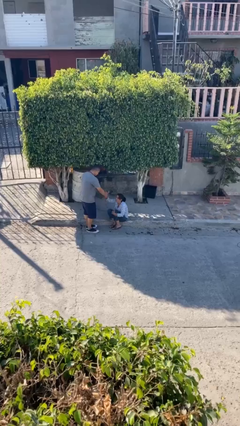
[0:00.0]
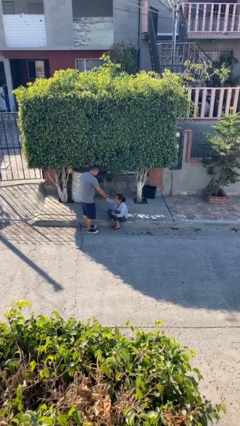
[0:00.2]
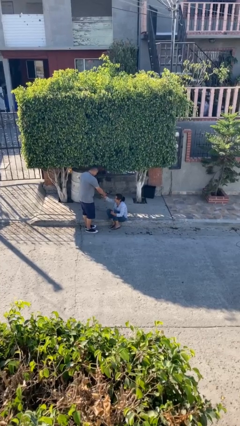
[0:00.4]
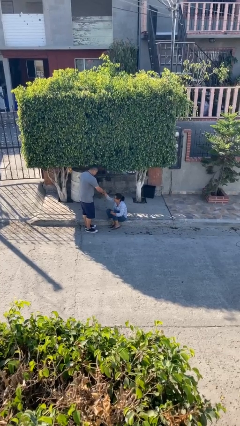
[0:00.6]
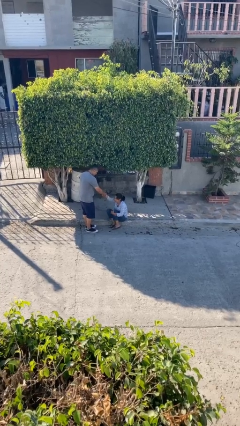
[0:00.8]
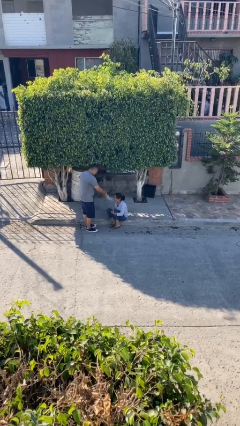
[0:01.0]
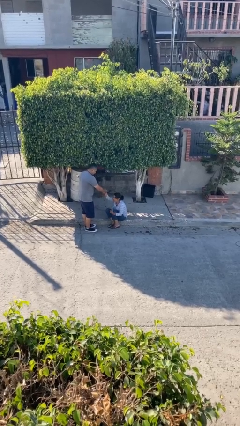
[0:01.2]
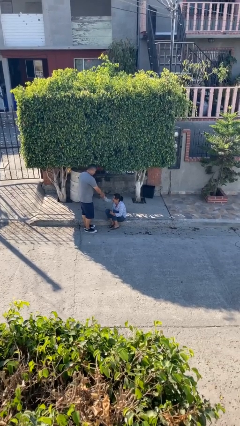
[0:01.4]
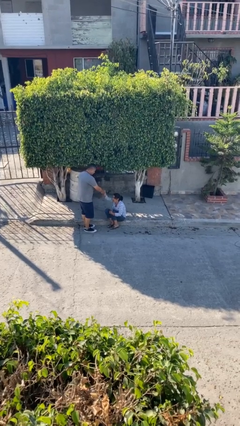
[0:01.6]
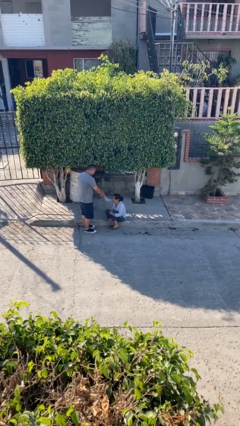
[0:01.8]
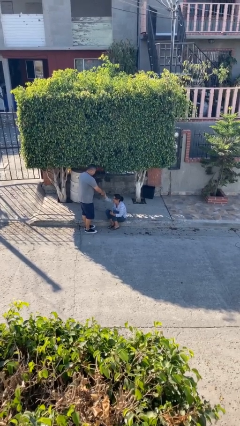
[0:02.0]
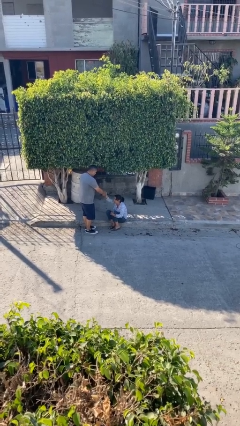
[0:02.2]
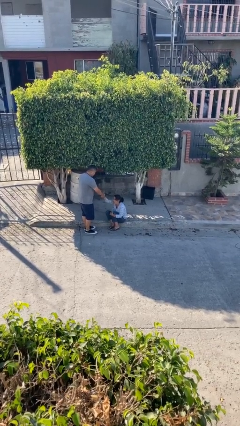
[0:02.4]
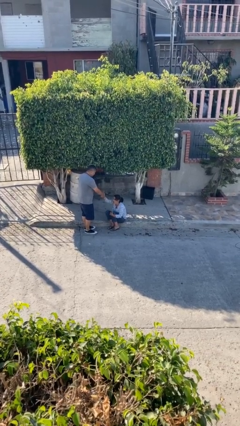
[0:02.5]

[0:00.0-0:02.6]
person shakes hand

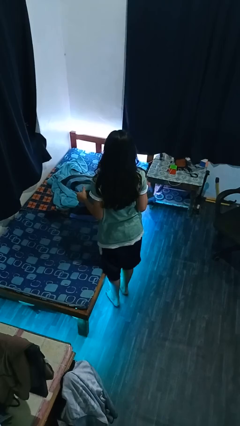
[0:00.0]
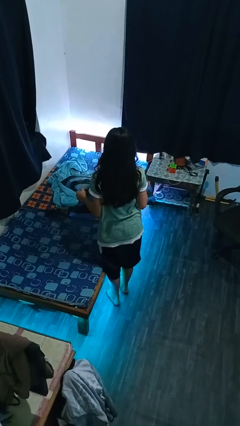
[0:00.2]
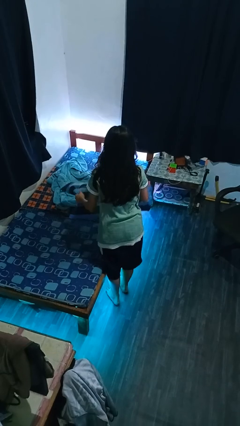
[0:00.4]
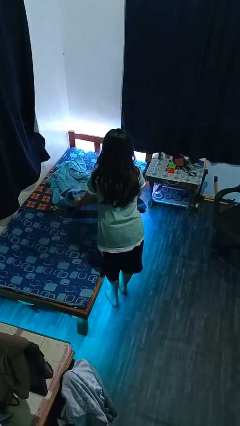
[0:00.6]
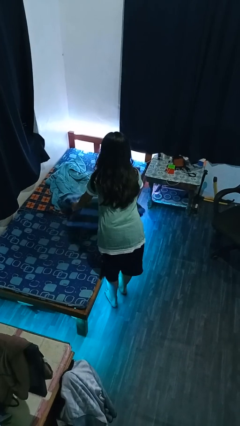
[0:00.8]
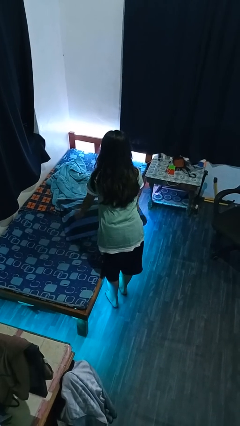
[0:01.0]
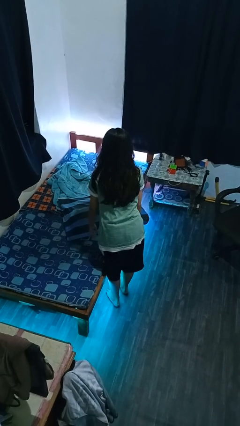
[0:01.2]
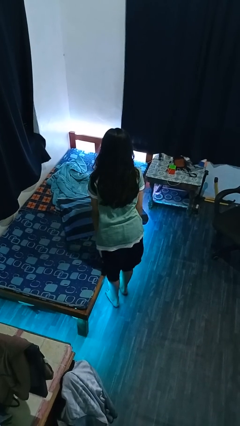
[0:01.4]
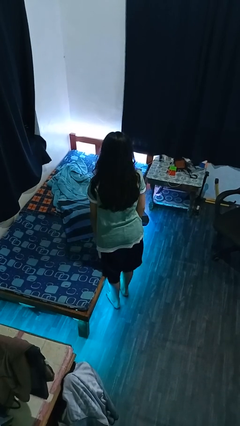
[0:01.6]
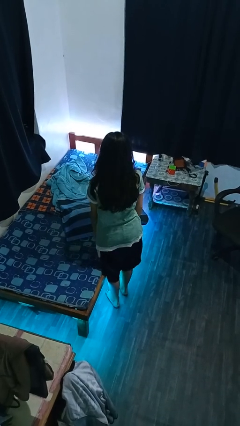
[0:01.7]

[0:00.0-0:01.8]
person puts down object on bed

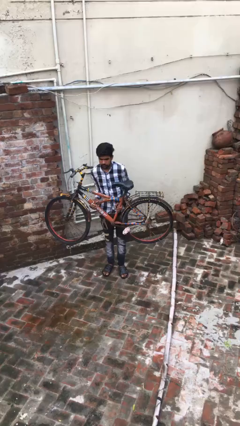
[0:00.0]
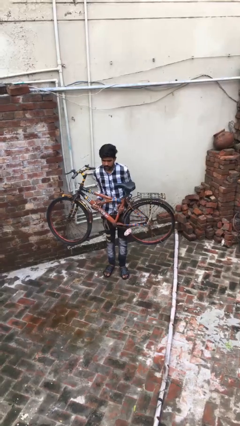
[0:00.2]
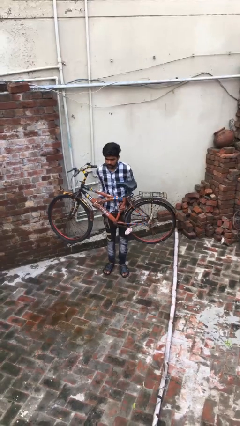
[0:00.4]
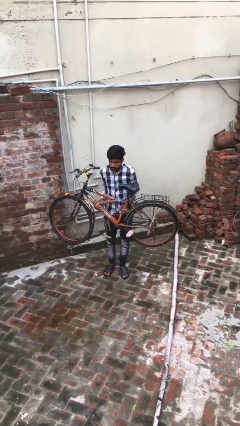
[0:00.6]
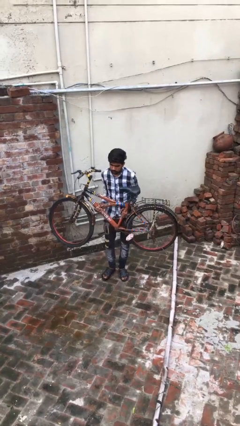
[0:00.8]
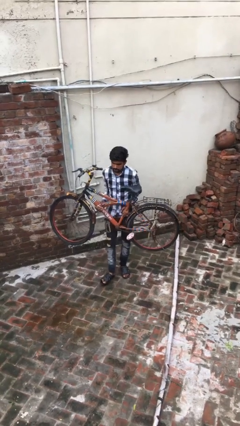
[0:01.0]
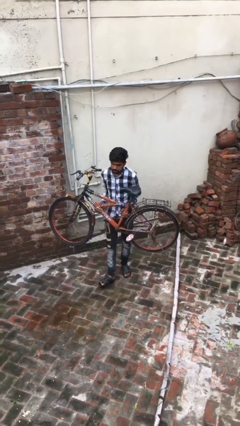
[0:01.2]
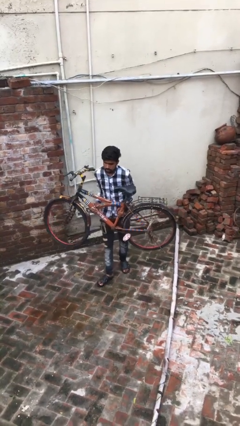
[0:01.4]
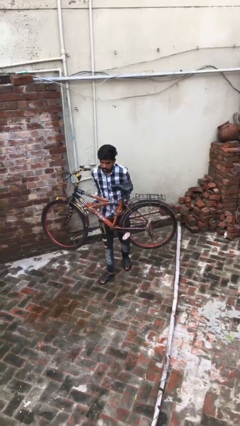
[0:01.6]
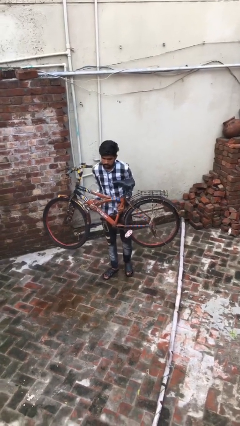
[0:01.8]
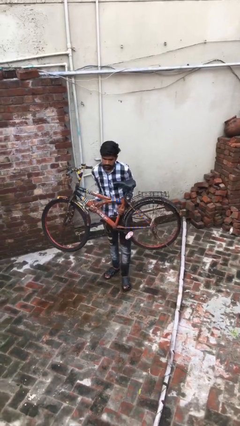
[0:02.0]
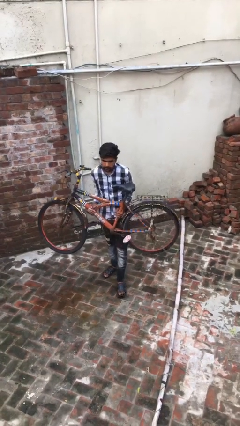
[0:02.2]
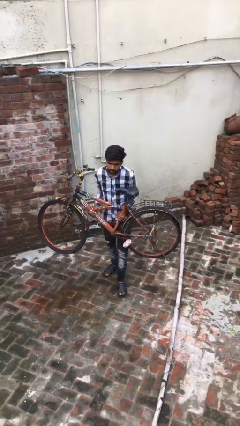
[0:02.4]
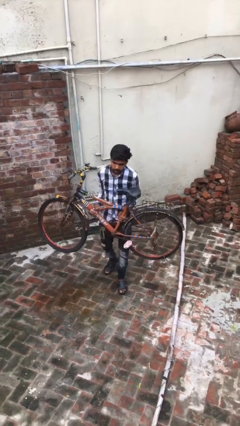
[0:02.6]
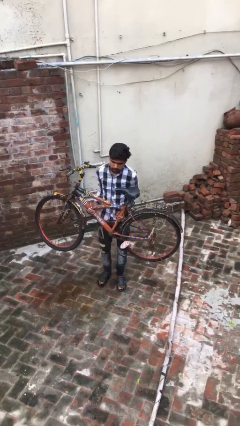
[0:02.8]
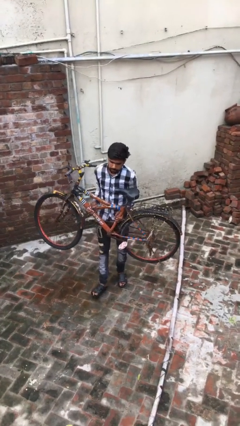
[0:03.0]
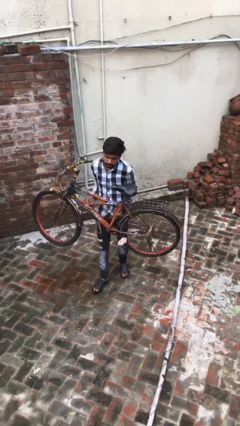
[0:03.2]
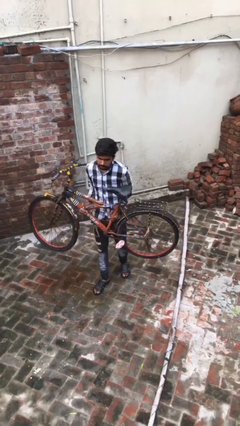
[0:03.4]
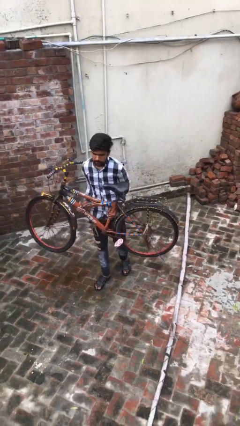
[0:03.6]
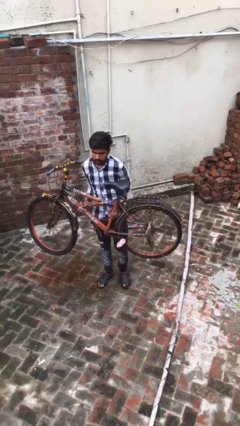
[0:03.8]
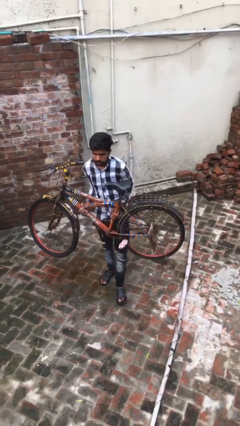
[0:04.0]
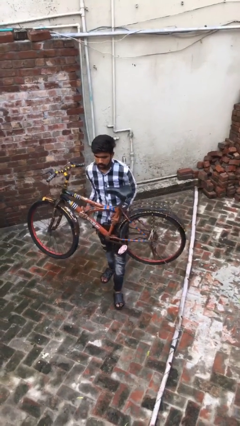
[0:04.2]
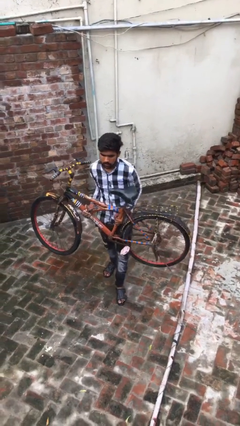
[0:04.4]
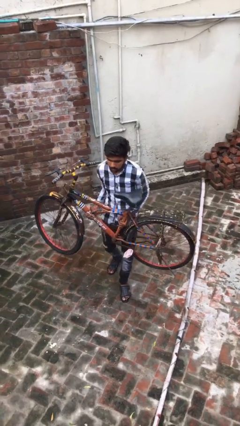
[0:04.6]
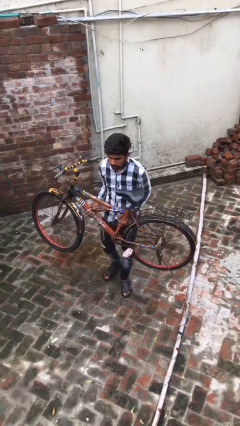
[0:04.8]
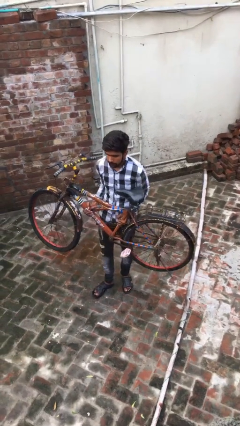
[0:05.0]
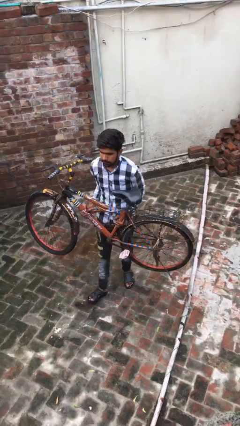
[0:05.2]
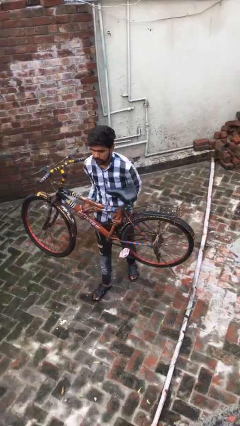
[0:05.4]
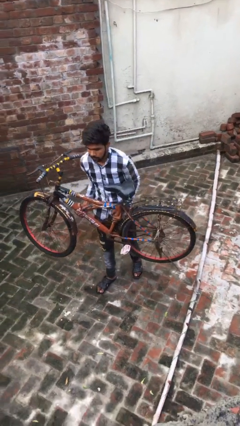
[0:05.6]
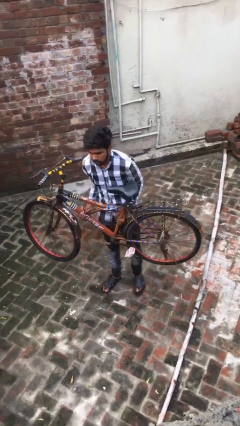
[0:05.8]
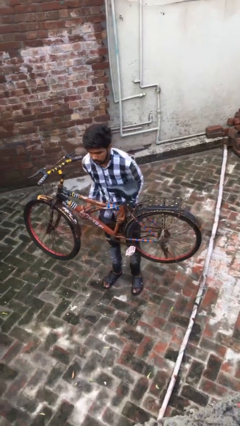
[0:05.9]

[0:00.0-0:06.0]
person carries heavy object

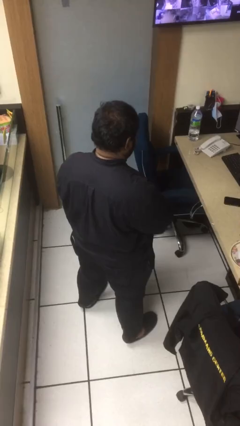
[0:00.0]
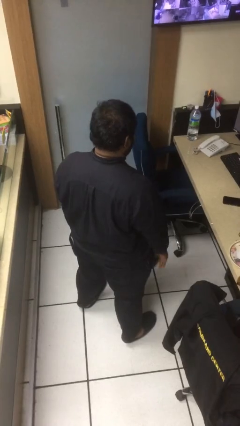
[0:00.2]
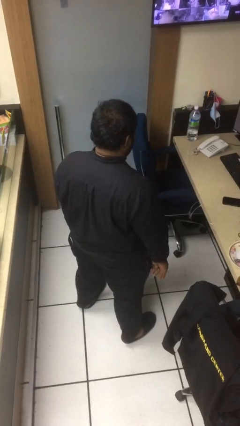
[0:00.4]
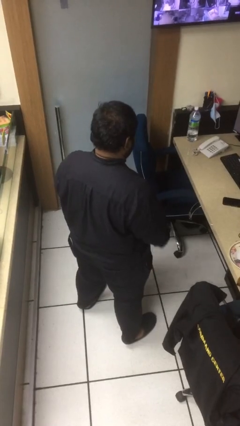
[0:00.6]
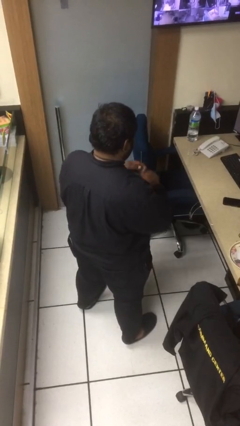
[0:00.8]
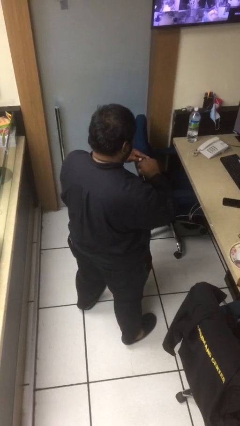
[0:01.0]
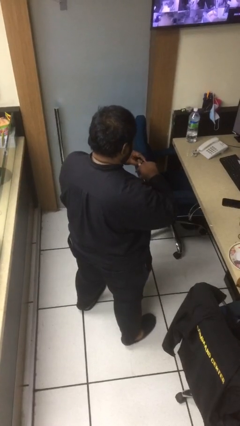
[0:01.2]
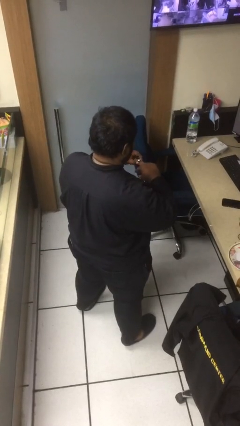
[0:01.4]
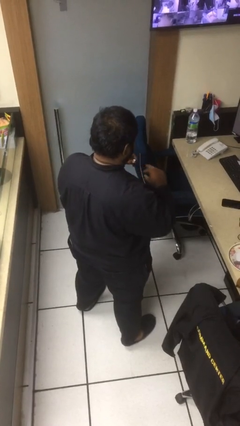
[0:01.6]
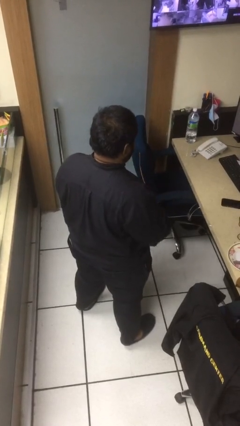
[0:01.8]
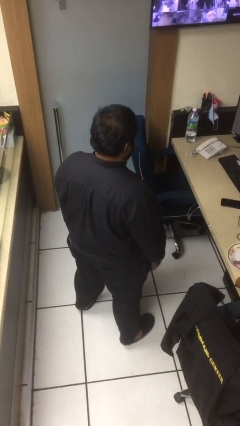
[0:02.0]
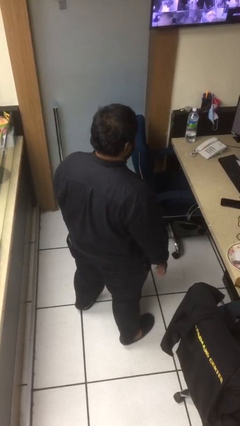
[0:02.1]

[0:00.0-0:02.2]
person takes off ring

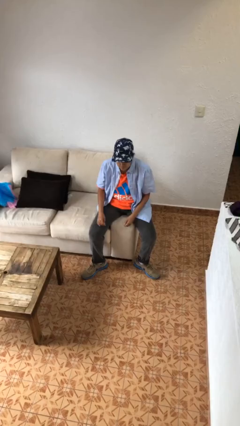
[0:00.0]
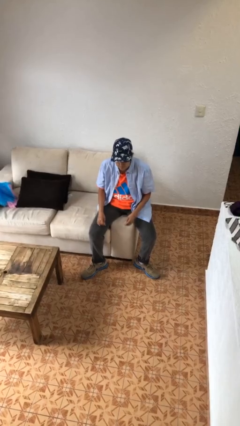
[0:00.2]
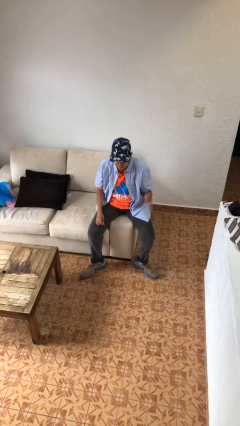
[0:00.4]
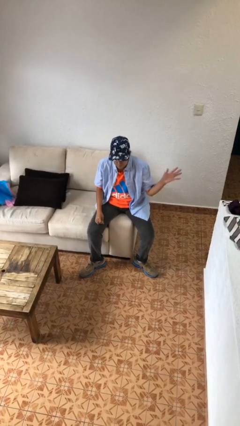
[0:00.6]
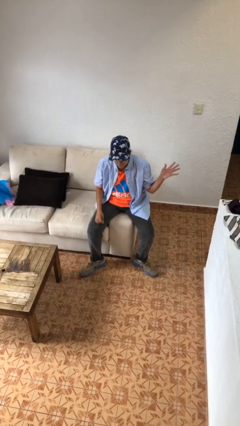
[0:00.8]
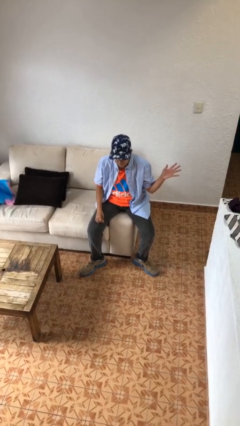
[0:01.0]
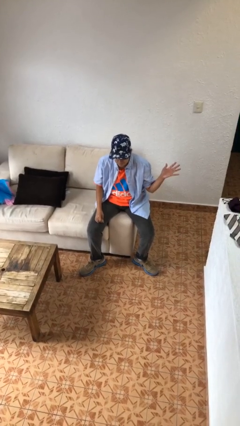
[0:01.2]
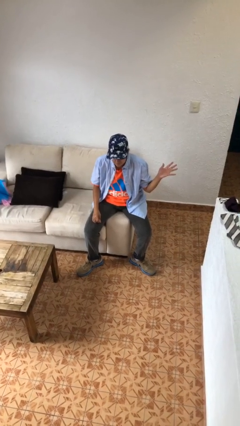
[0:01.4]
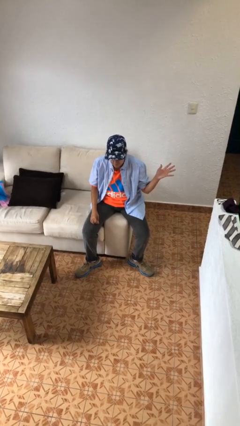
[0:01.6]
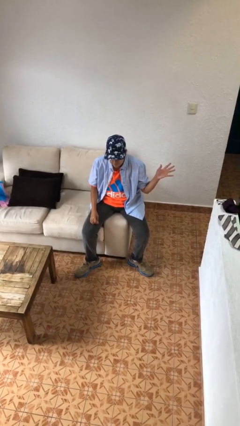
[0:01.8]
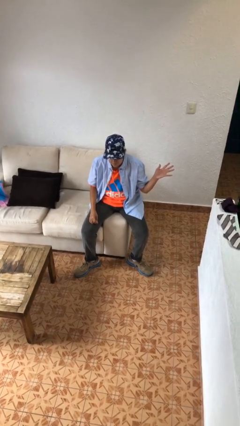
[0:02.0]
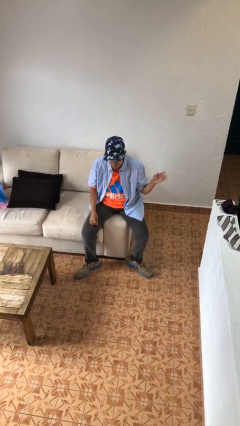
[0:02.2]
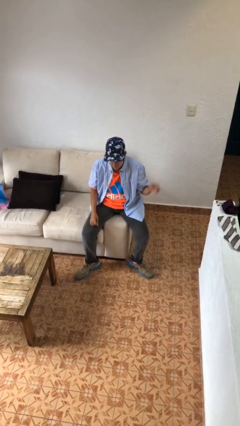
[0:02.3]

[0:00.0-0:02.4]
person gestures number five

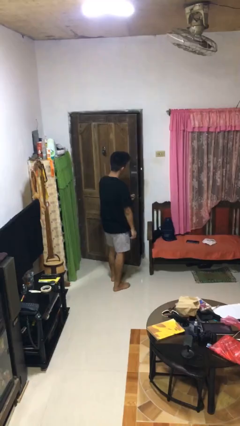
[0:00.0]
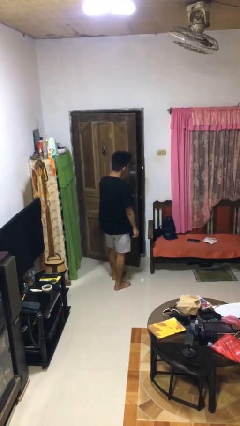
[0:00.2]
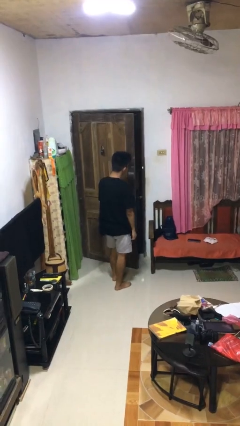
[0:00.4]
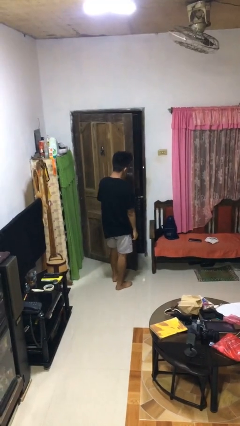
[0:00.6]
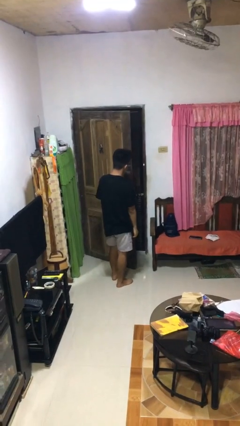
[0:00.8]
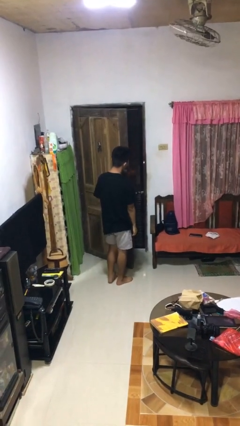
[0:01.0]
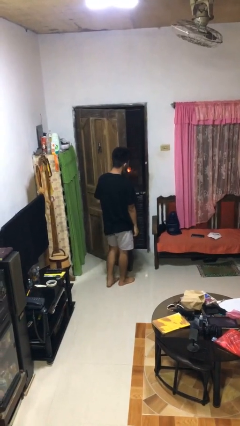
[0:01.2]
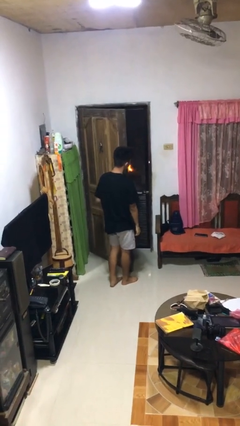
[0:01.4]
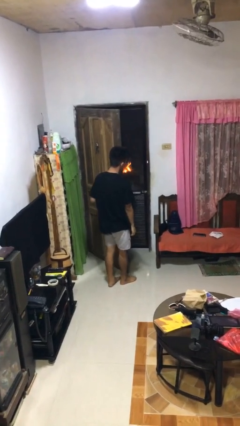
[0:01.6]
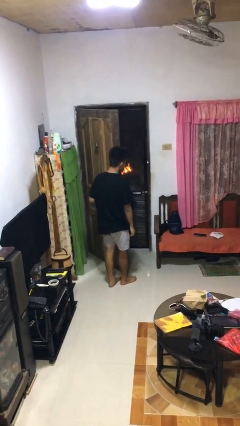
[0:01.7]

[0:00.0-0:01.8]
person opens facility door

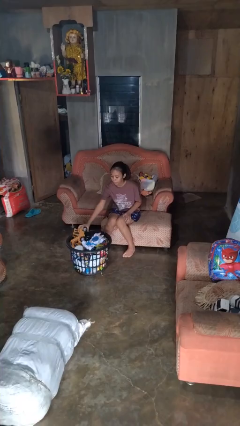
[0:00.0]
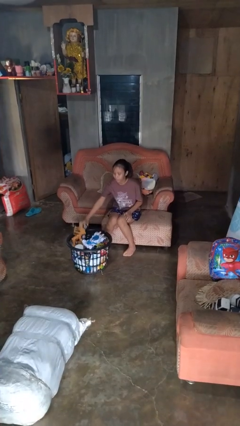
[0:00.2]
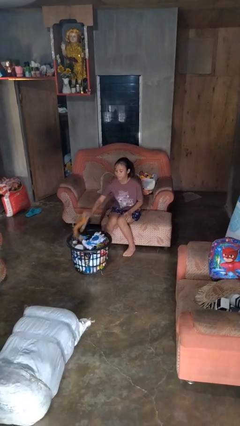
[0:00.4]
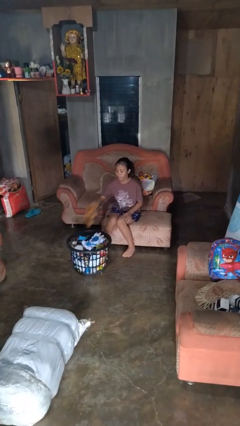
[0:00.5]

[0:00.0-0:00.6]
person takes object from basket
